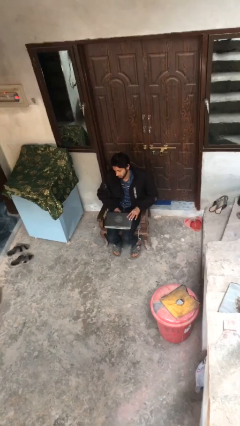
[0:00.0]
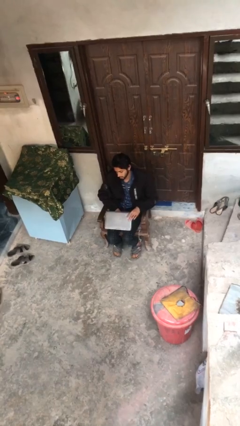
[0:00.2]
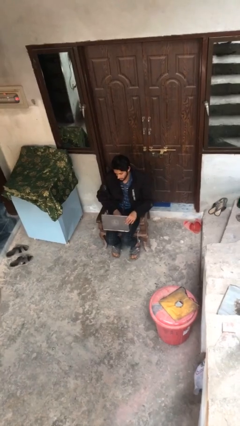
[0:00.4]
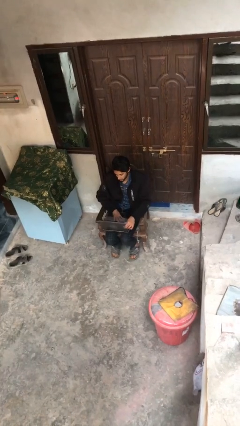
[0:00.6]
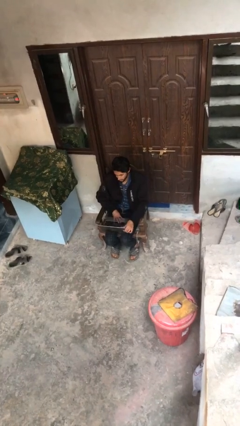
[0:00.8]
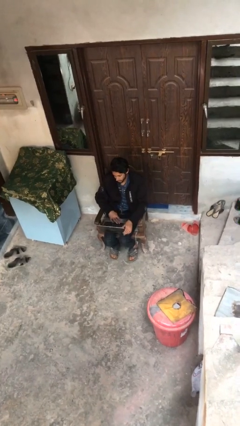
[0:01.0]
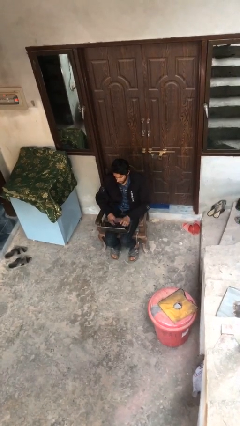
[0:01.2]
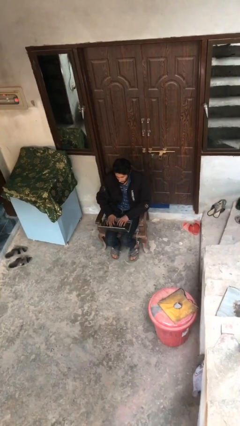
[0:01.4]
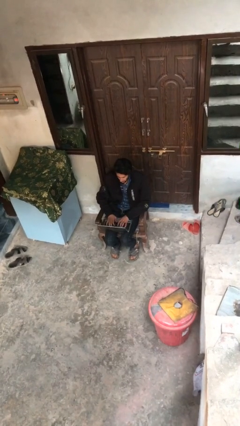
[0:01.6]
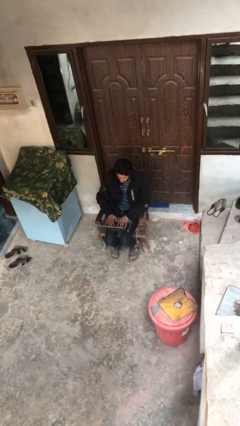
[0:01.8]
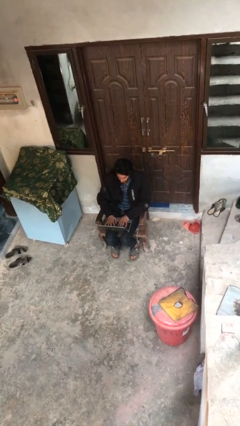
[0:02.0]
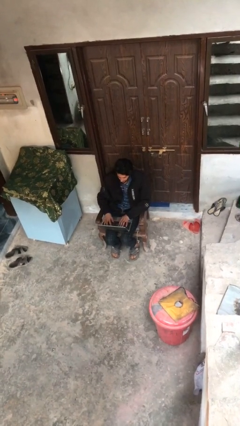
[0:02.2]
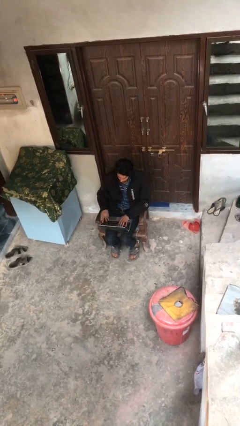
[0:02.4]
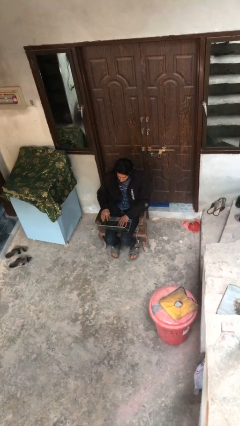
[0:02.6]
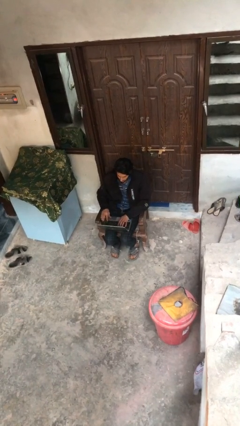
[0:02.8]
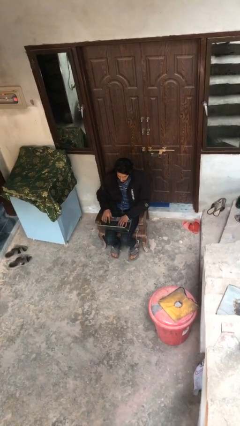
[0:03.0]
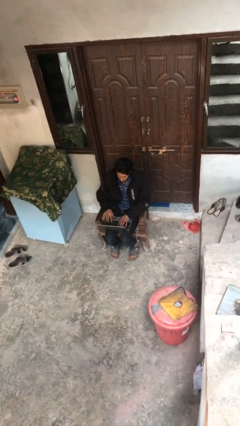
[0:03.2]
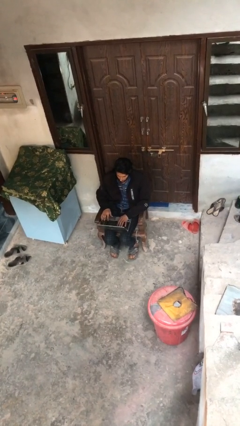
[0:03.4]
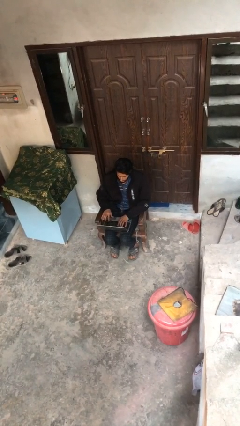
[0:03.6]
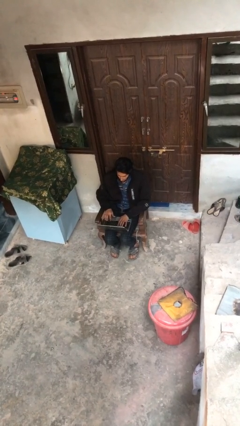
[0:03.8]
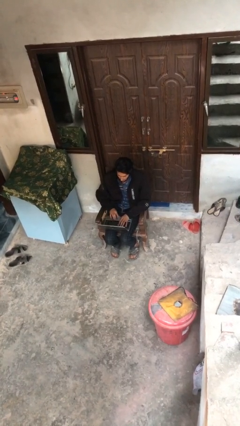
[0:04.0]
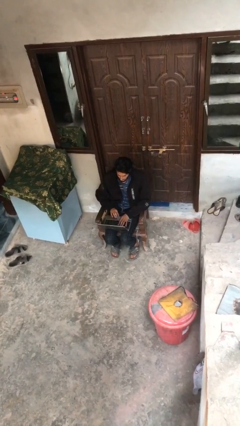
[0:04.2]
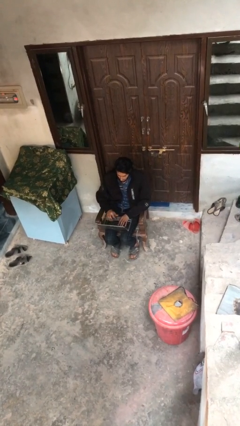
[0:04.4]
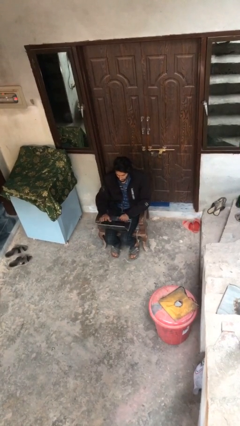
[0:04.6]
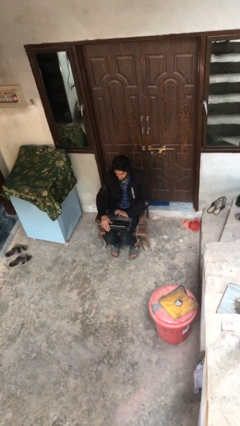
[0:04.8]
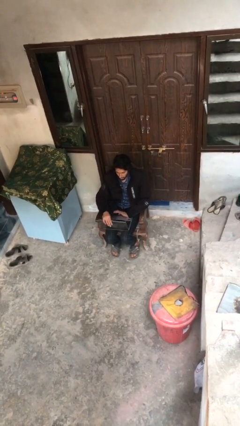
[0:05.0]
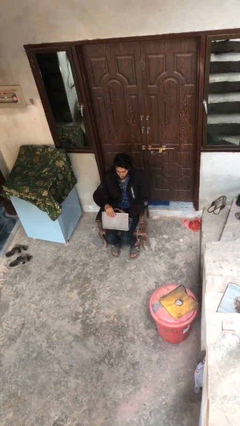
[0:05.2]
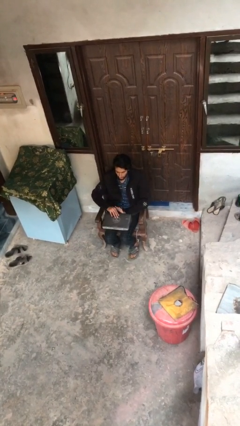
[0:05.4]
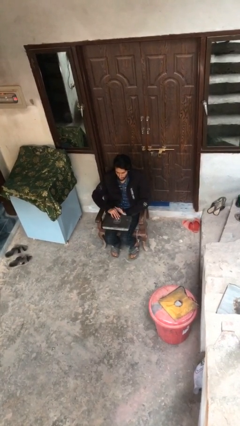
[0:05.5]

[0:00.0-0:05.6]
person interacts with laptop

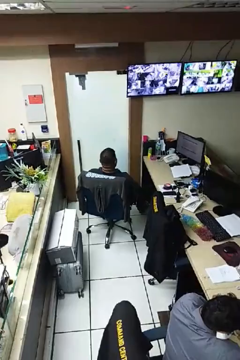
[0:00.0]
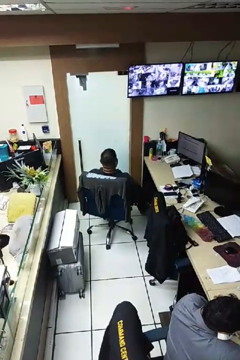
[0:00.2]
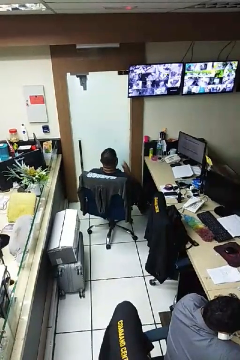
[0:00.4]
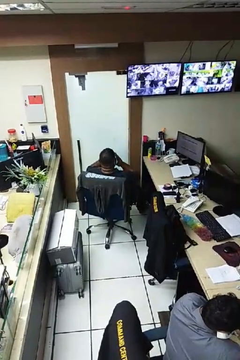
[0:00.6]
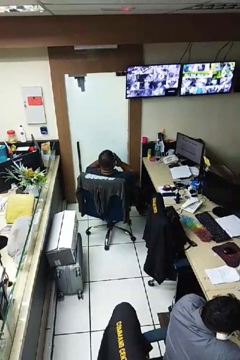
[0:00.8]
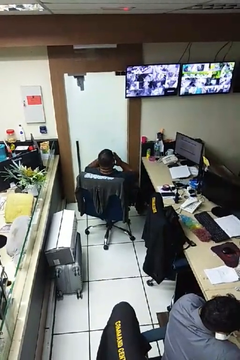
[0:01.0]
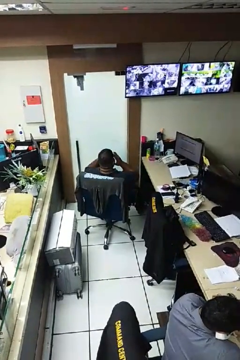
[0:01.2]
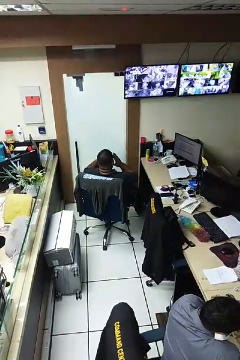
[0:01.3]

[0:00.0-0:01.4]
person covers face with hands

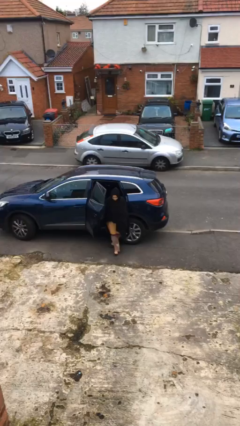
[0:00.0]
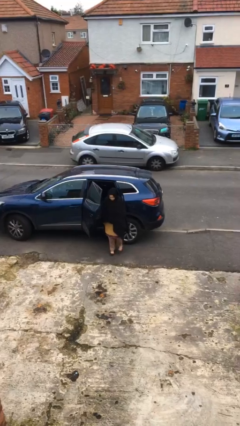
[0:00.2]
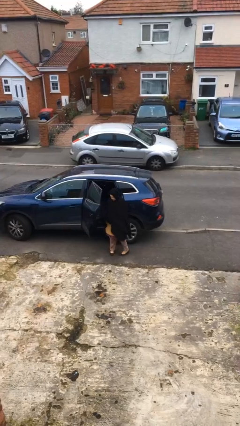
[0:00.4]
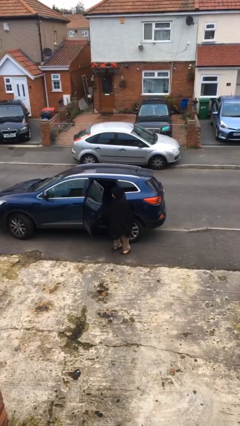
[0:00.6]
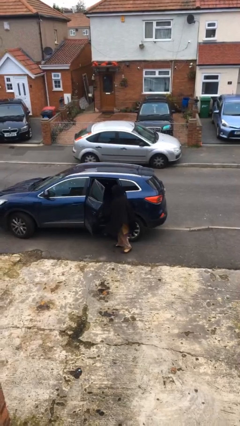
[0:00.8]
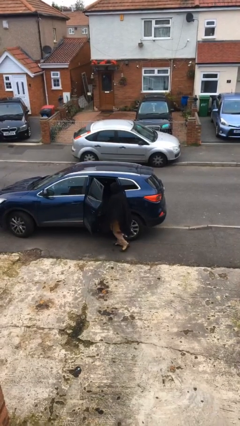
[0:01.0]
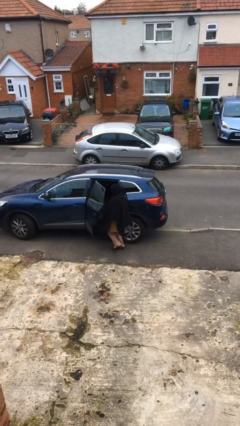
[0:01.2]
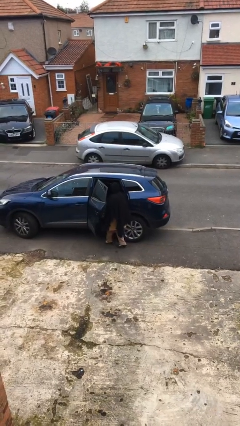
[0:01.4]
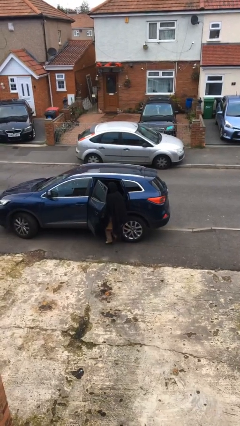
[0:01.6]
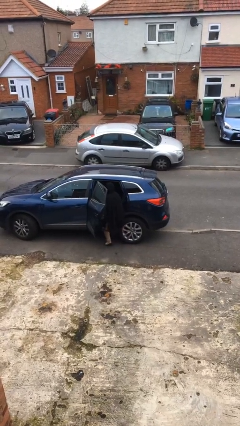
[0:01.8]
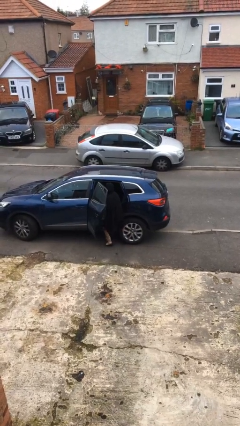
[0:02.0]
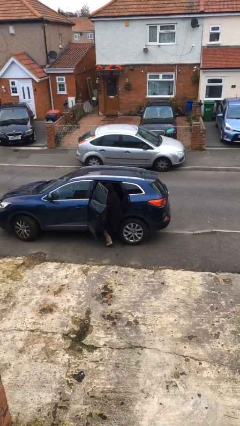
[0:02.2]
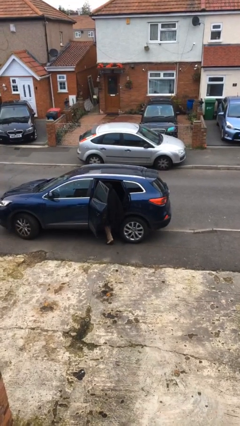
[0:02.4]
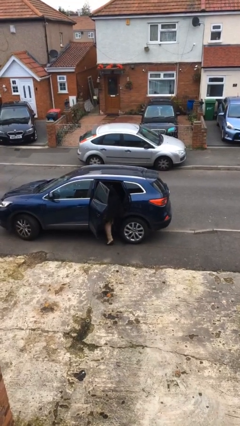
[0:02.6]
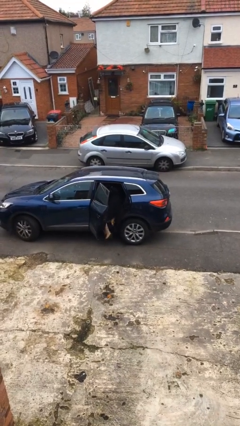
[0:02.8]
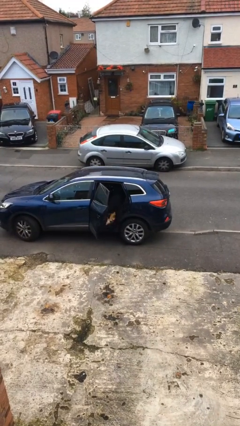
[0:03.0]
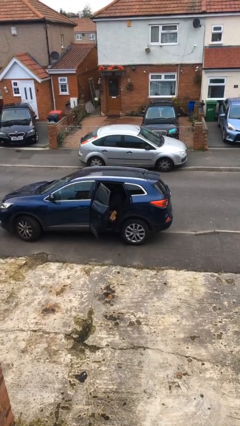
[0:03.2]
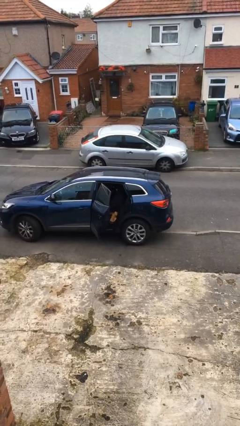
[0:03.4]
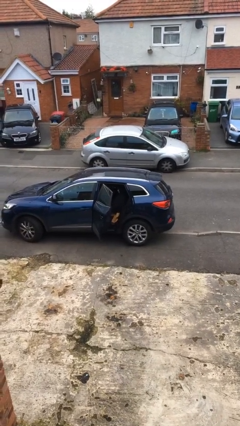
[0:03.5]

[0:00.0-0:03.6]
person enters car

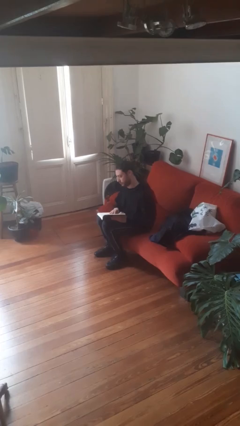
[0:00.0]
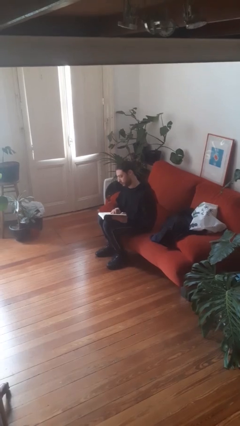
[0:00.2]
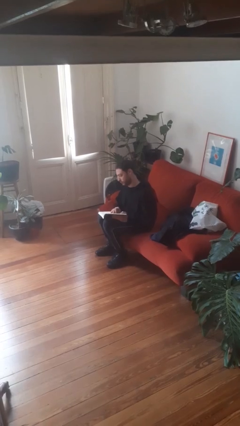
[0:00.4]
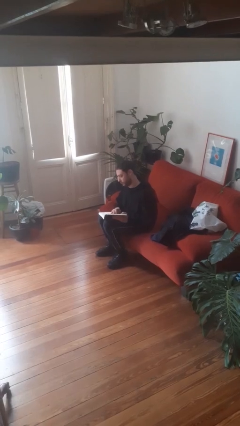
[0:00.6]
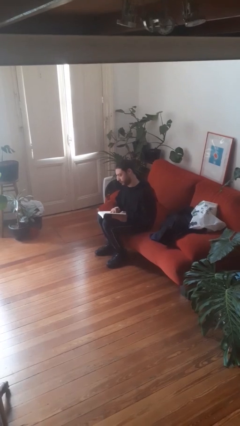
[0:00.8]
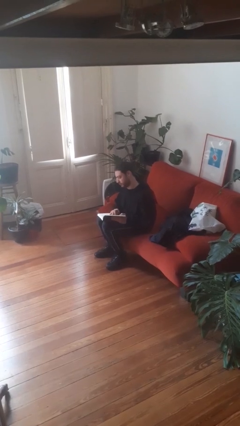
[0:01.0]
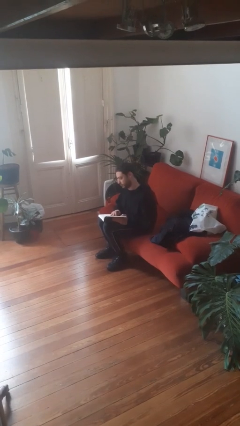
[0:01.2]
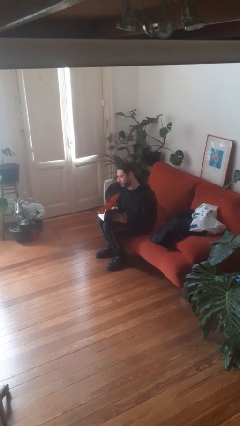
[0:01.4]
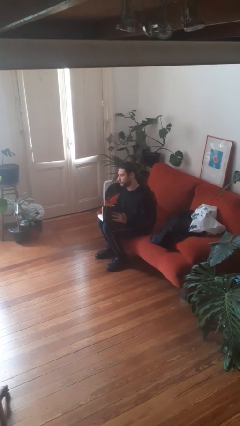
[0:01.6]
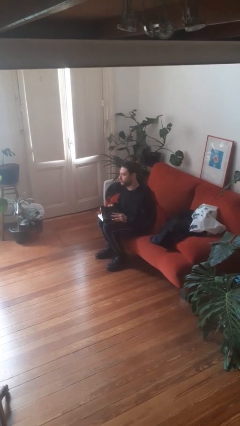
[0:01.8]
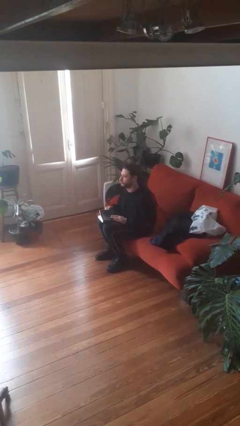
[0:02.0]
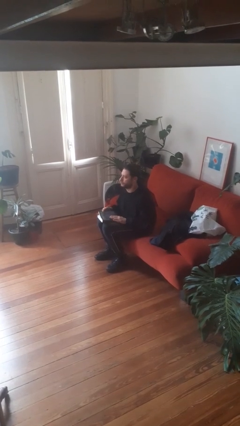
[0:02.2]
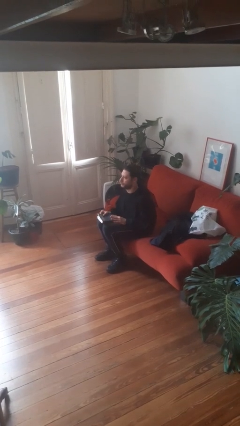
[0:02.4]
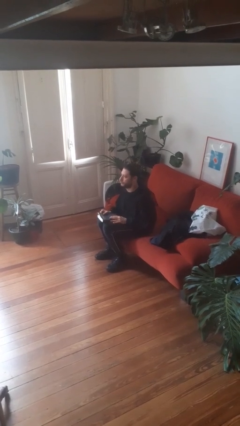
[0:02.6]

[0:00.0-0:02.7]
person reads book

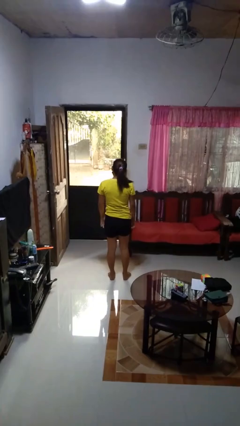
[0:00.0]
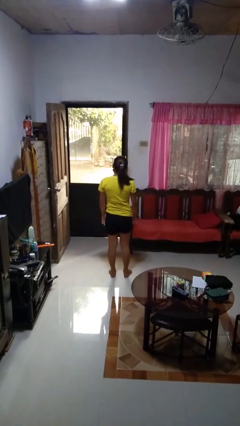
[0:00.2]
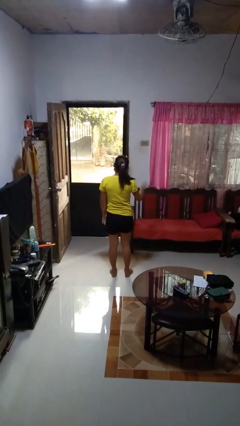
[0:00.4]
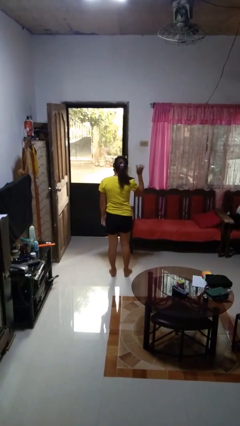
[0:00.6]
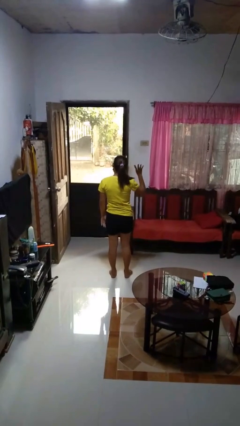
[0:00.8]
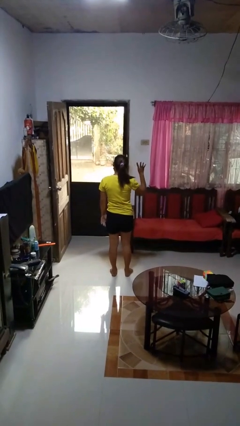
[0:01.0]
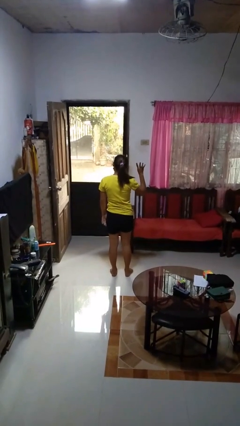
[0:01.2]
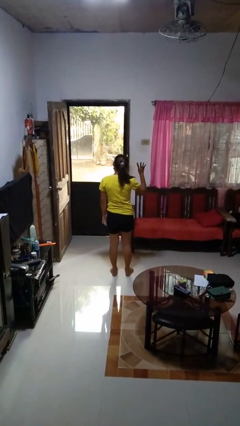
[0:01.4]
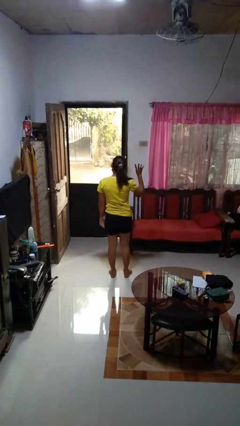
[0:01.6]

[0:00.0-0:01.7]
person gestures number four

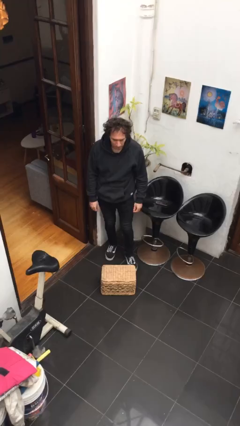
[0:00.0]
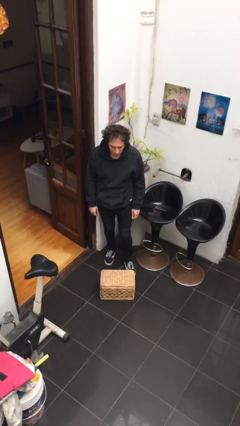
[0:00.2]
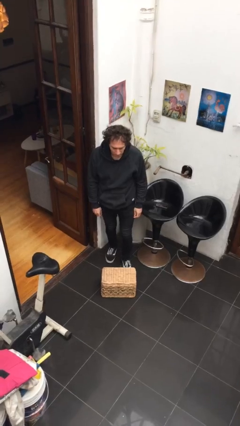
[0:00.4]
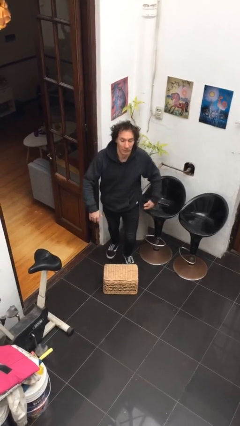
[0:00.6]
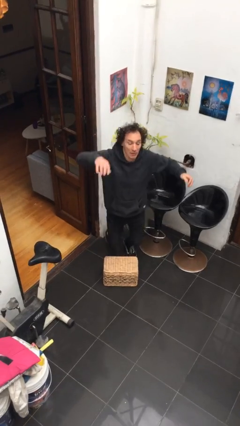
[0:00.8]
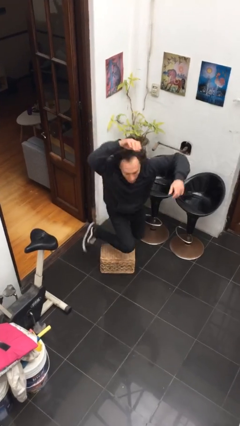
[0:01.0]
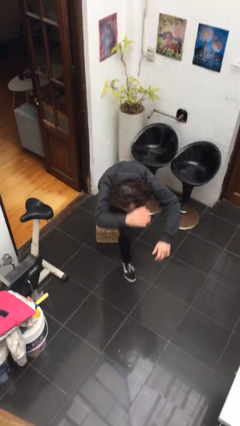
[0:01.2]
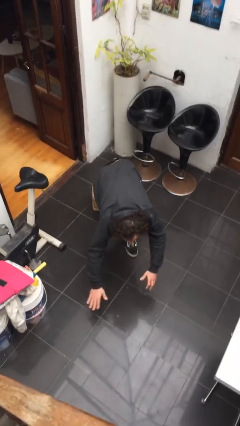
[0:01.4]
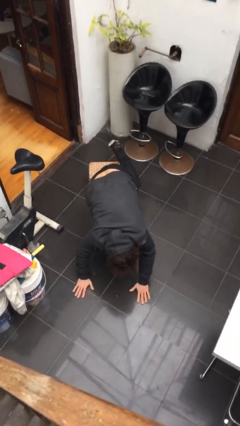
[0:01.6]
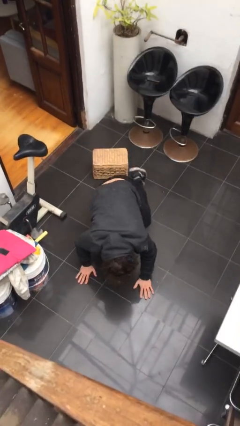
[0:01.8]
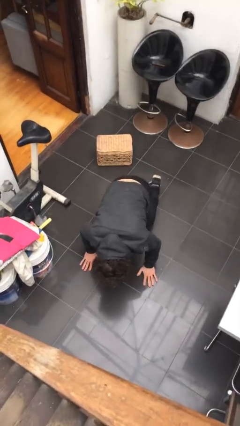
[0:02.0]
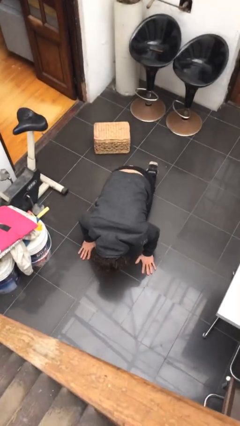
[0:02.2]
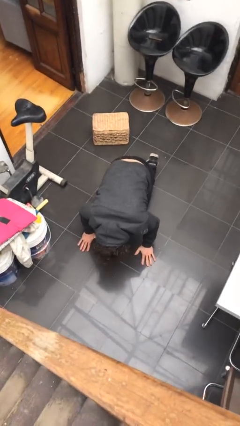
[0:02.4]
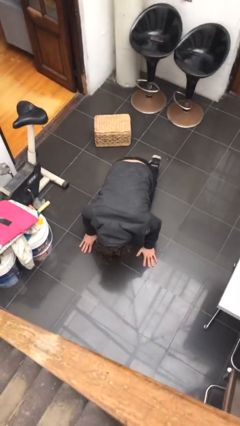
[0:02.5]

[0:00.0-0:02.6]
person trips on object on floor

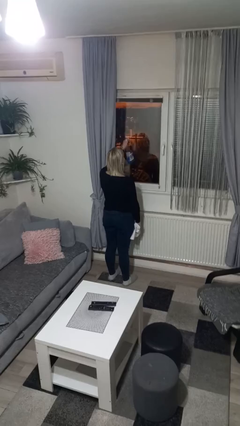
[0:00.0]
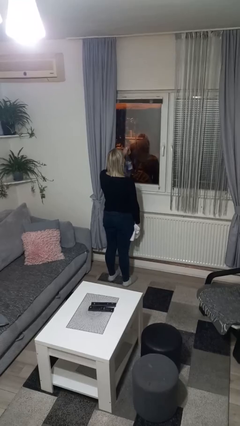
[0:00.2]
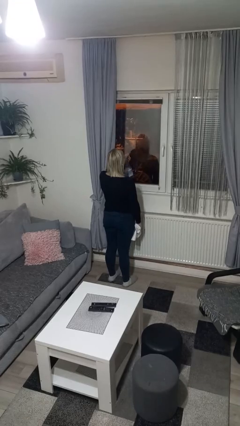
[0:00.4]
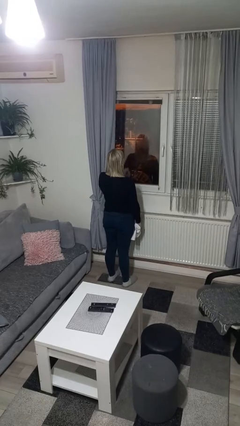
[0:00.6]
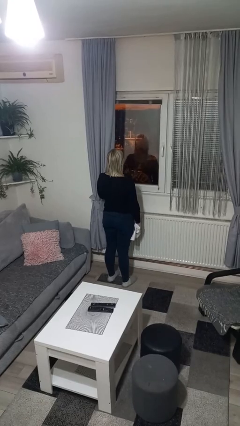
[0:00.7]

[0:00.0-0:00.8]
person sprays from bottle
